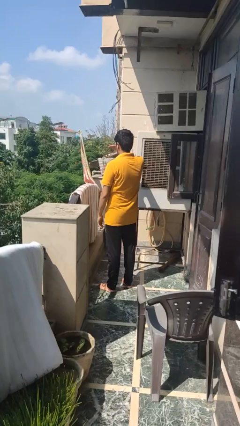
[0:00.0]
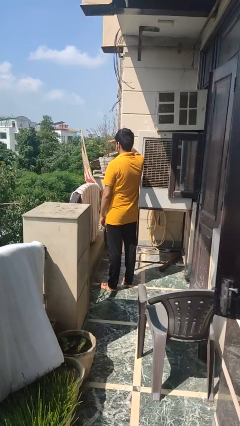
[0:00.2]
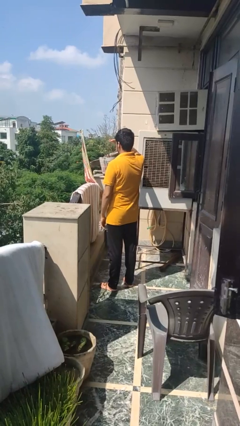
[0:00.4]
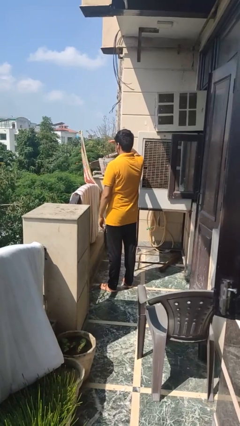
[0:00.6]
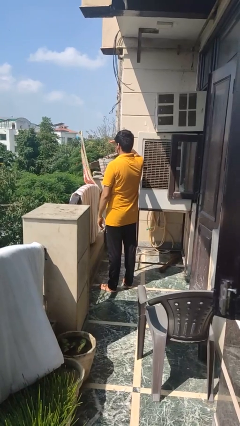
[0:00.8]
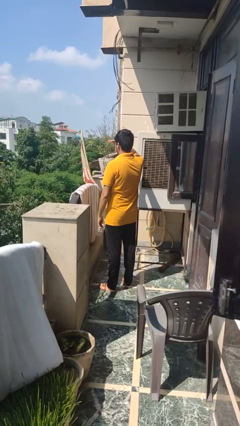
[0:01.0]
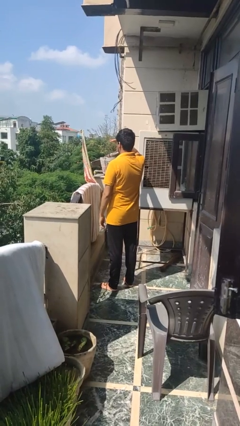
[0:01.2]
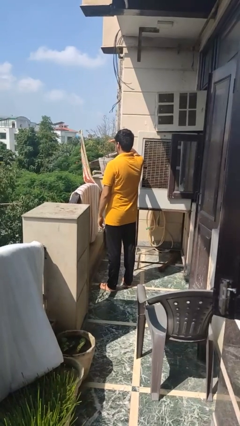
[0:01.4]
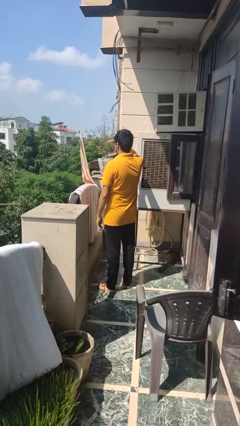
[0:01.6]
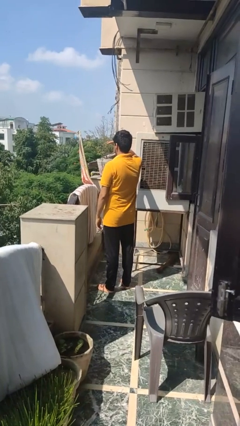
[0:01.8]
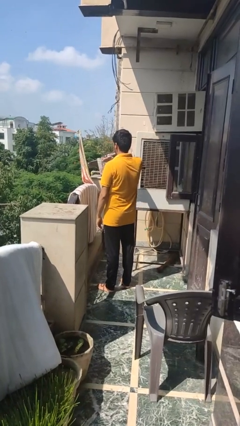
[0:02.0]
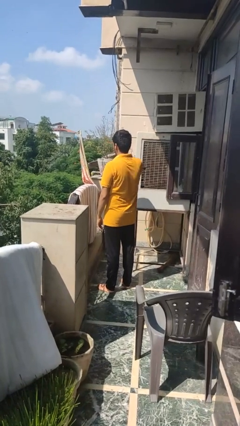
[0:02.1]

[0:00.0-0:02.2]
person shades eyes

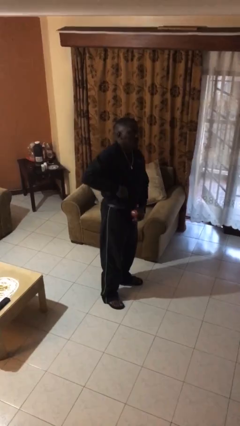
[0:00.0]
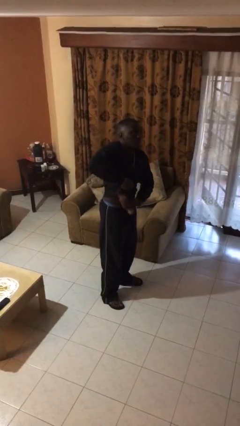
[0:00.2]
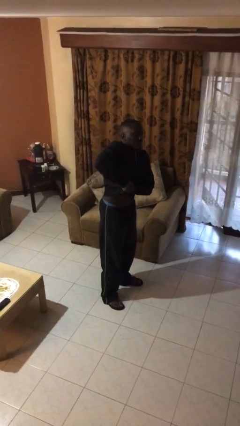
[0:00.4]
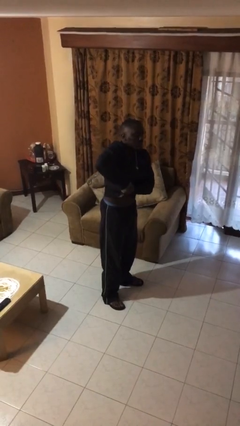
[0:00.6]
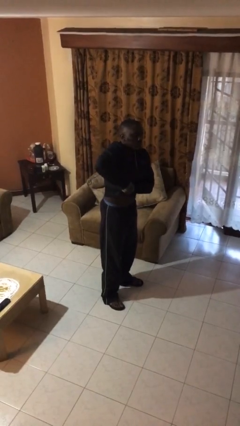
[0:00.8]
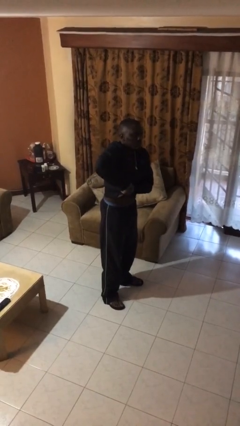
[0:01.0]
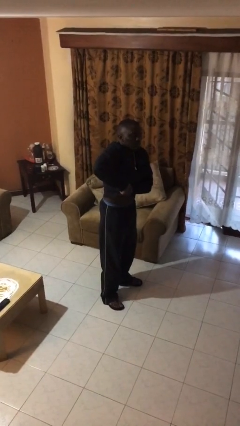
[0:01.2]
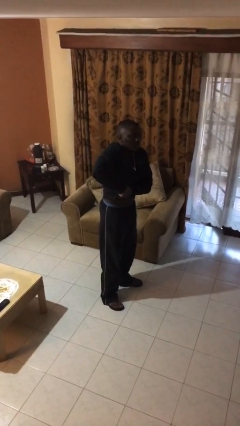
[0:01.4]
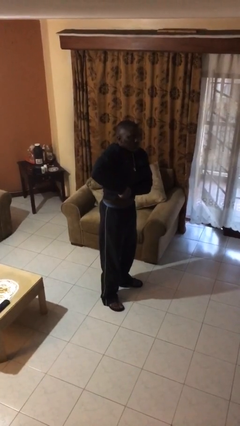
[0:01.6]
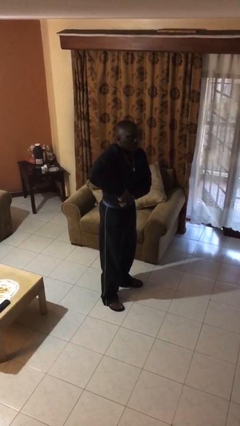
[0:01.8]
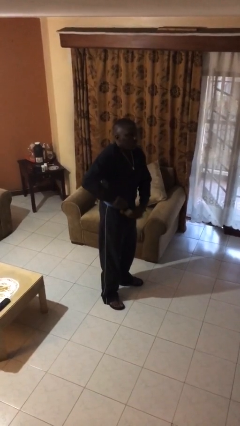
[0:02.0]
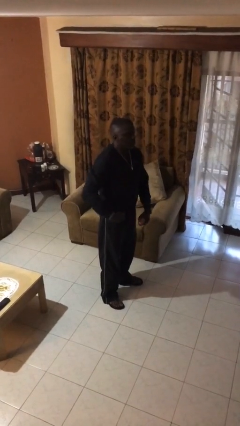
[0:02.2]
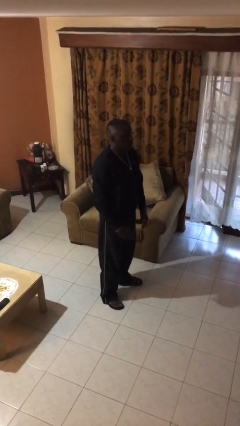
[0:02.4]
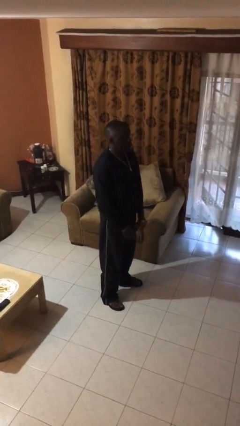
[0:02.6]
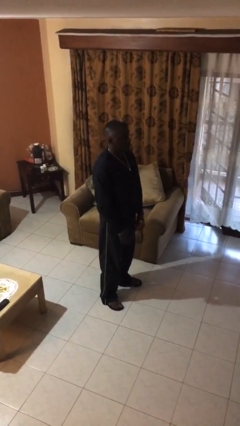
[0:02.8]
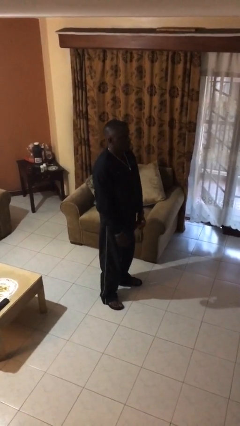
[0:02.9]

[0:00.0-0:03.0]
person applies deodorant

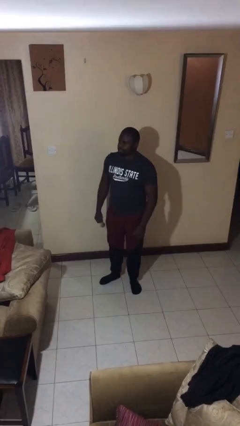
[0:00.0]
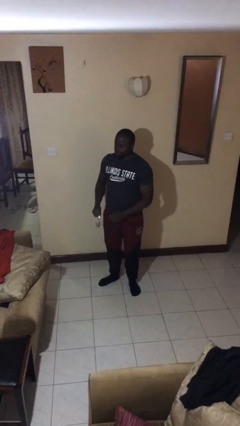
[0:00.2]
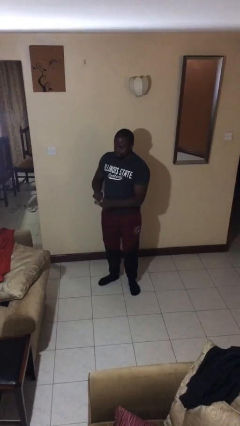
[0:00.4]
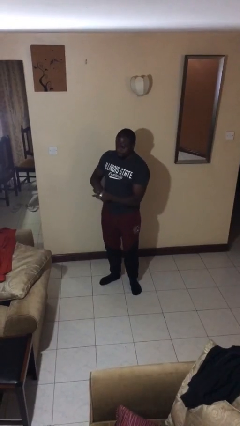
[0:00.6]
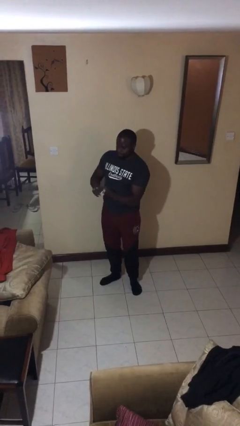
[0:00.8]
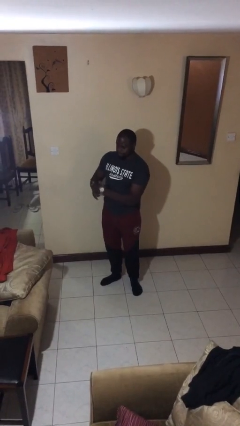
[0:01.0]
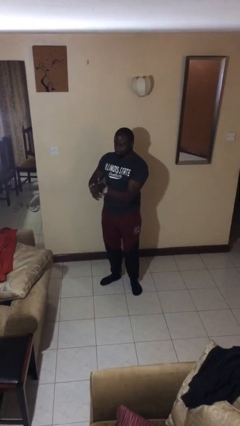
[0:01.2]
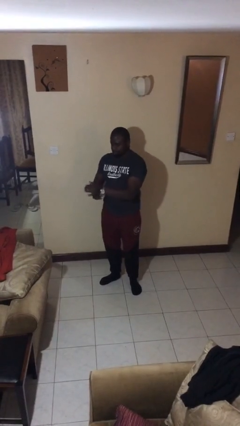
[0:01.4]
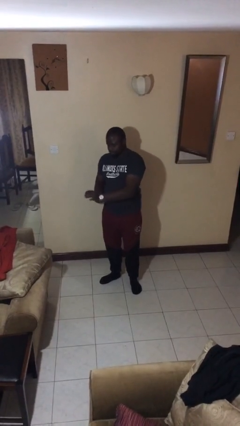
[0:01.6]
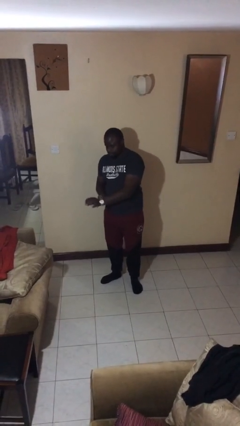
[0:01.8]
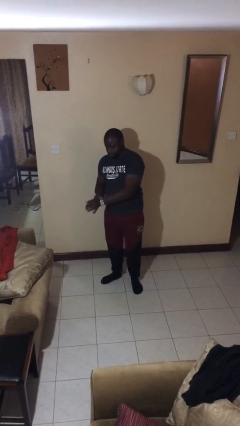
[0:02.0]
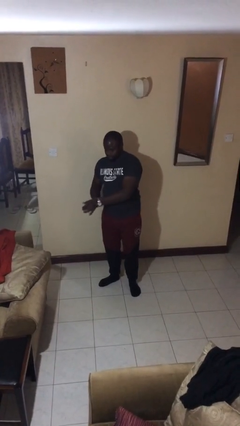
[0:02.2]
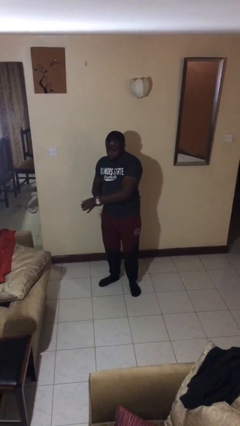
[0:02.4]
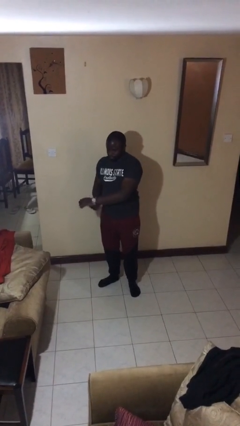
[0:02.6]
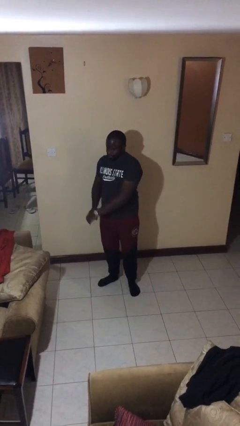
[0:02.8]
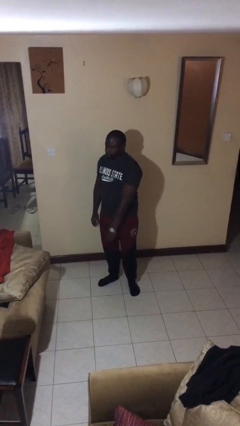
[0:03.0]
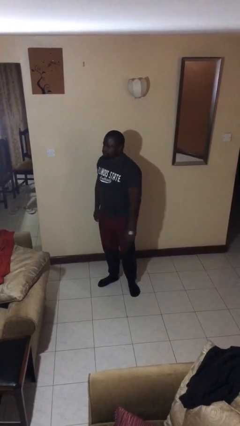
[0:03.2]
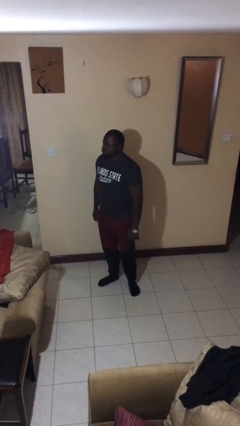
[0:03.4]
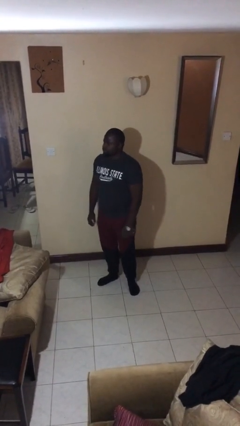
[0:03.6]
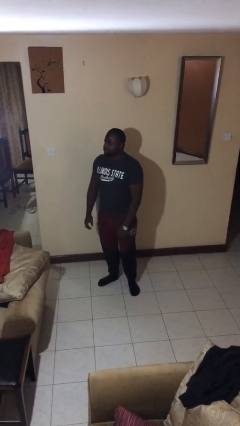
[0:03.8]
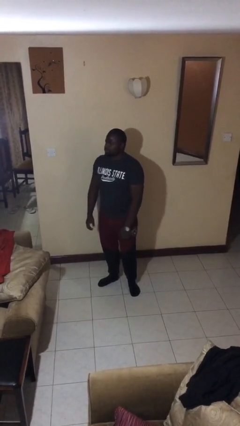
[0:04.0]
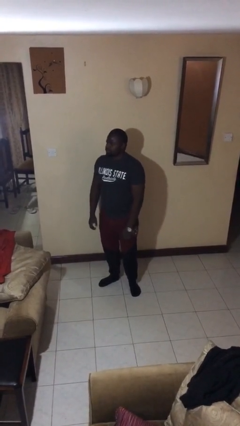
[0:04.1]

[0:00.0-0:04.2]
person puts on wristwatch

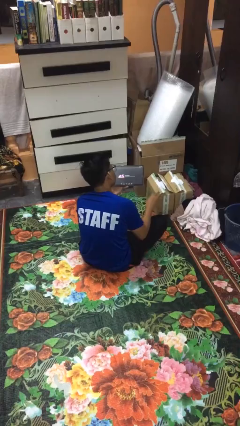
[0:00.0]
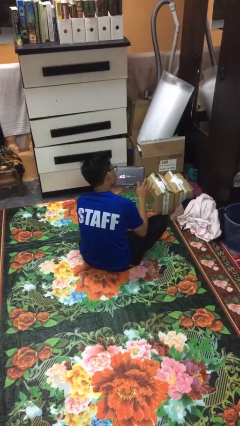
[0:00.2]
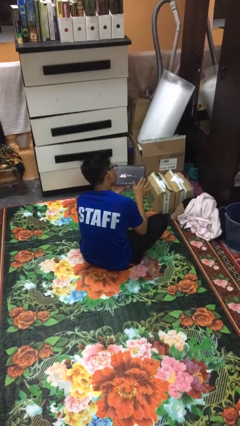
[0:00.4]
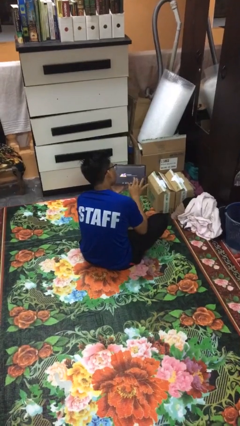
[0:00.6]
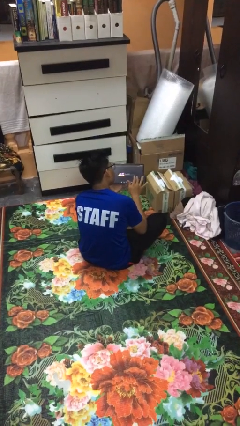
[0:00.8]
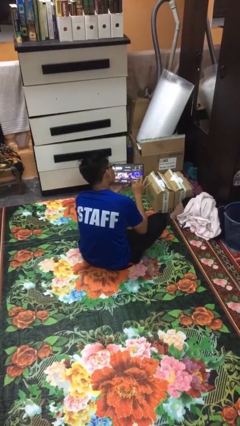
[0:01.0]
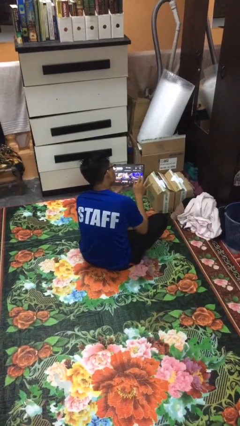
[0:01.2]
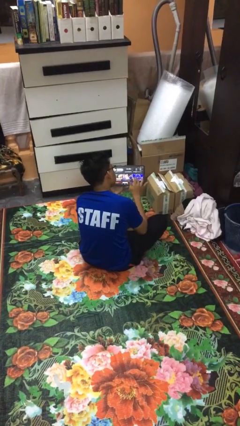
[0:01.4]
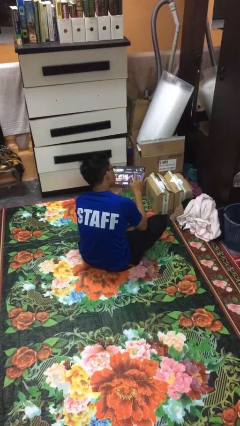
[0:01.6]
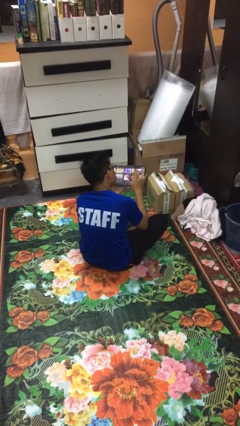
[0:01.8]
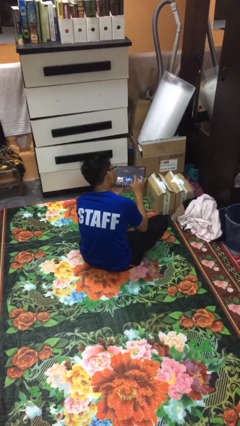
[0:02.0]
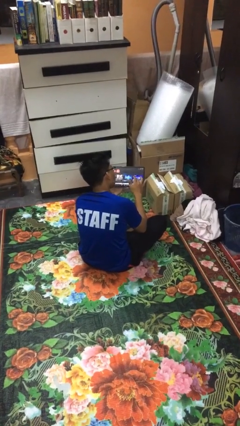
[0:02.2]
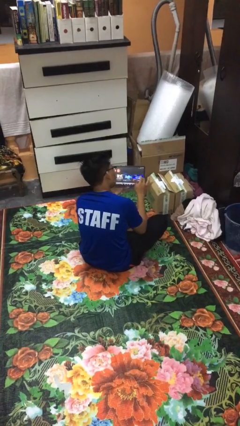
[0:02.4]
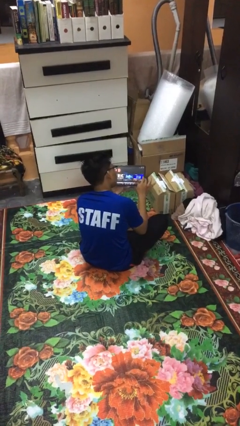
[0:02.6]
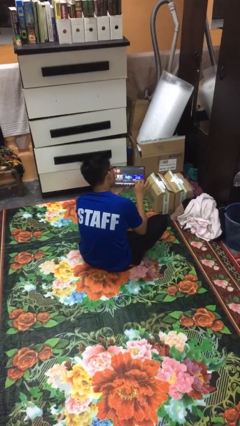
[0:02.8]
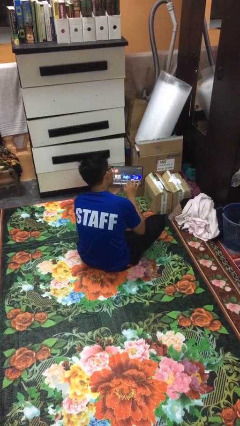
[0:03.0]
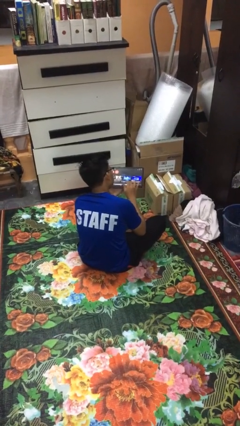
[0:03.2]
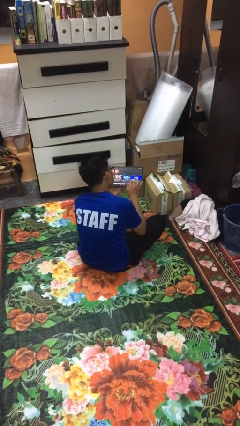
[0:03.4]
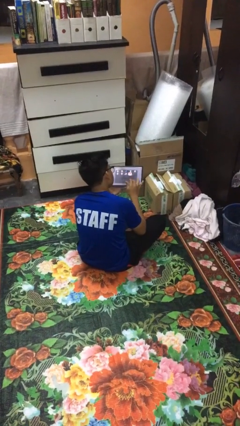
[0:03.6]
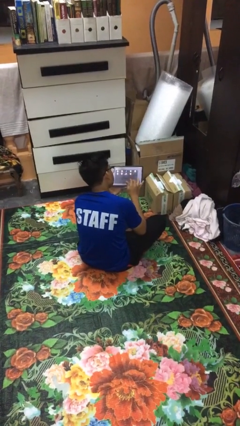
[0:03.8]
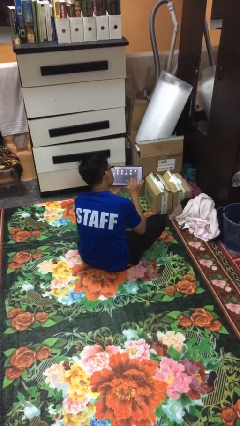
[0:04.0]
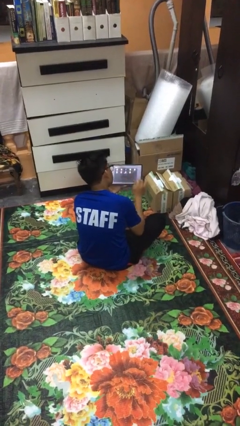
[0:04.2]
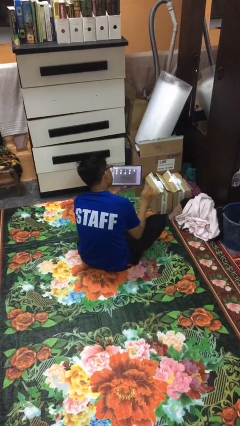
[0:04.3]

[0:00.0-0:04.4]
person interacts with tablet

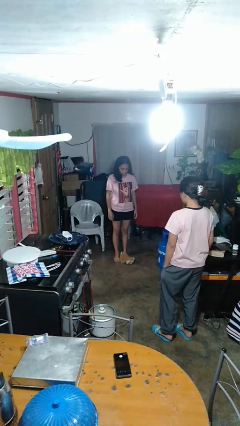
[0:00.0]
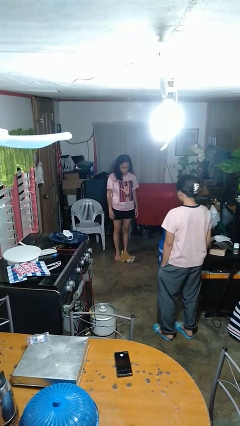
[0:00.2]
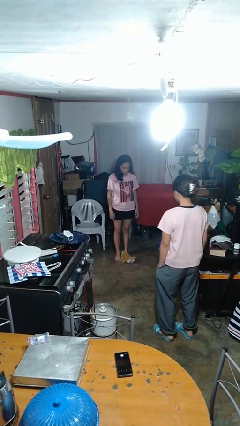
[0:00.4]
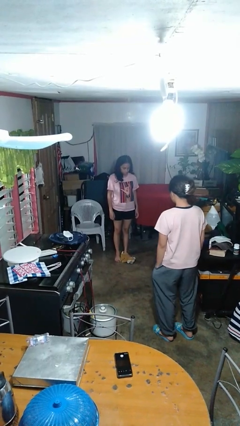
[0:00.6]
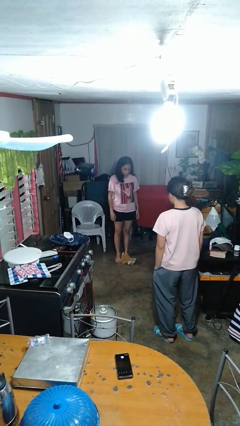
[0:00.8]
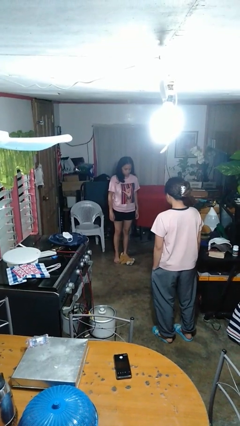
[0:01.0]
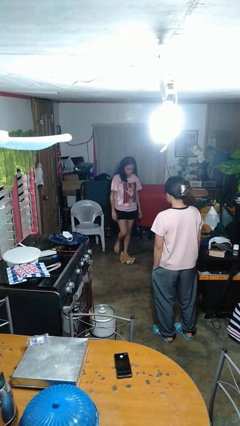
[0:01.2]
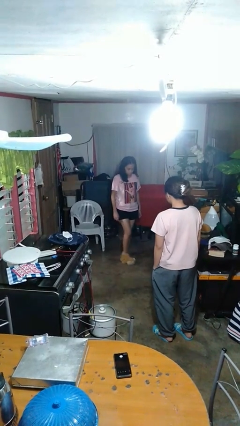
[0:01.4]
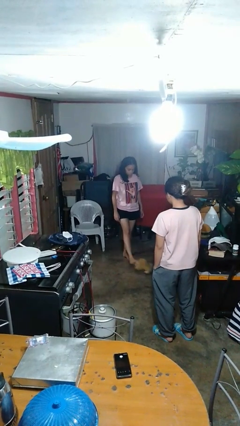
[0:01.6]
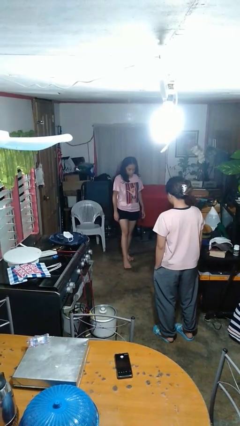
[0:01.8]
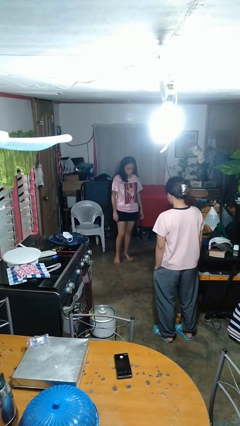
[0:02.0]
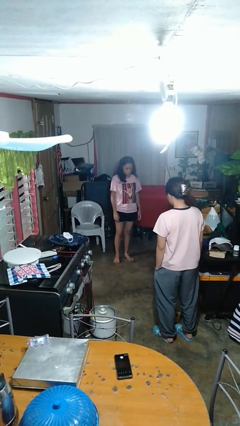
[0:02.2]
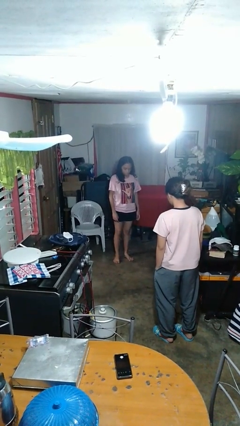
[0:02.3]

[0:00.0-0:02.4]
person kicks object to person

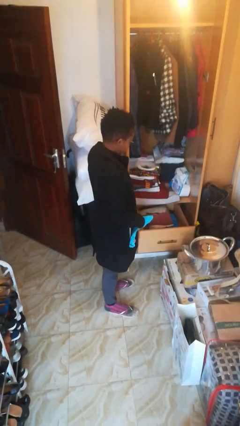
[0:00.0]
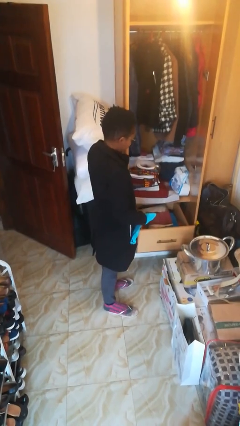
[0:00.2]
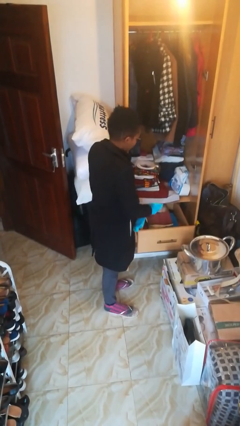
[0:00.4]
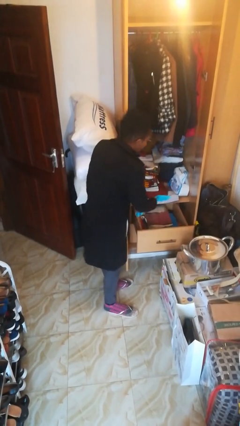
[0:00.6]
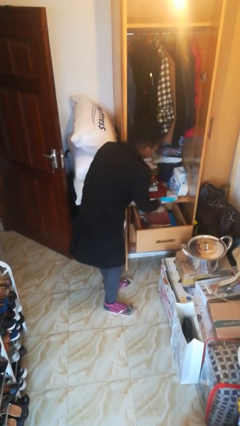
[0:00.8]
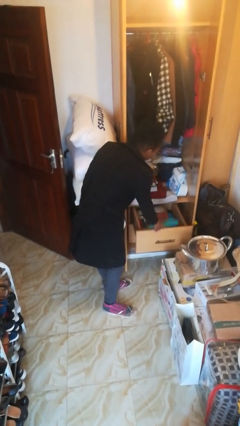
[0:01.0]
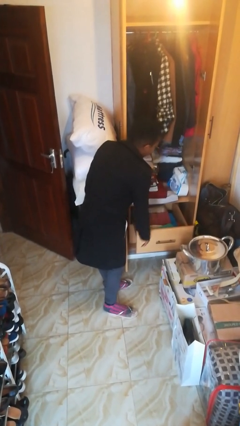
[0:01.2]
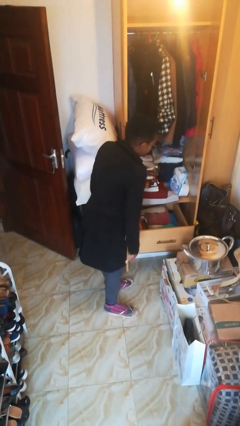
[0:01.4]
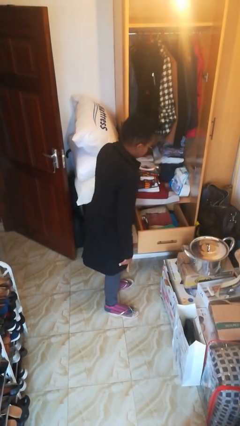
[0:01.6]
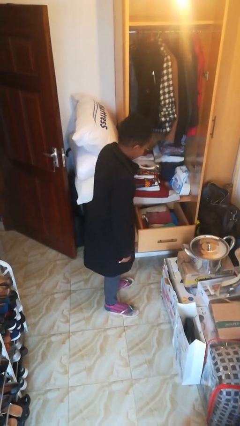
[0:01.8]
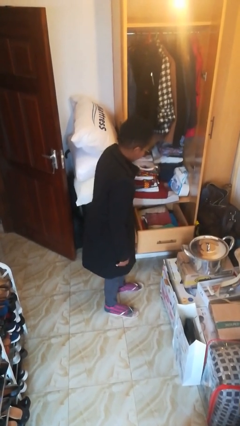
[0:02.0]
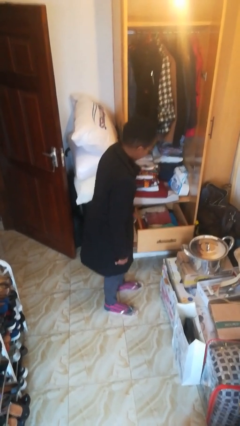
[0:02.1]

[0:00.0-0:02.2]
person puts clothes into dresser
